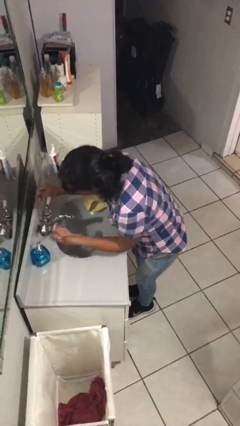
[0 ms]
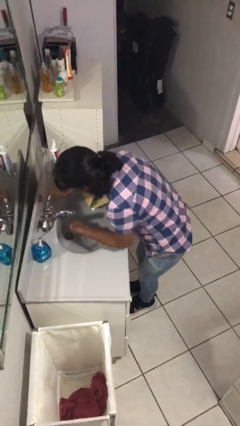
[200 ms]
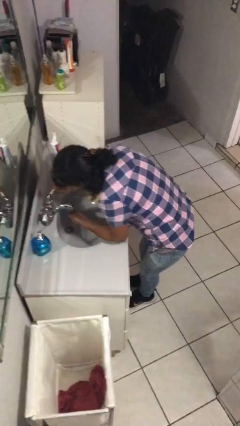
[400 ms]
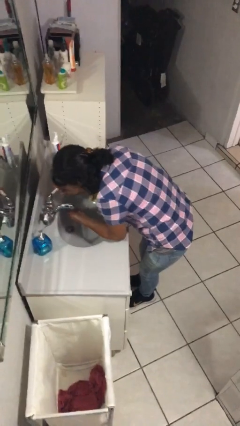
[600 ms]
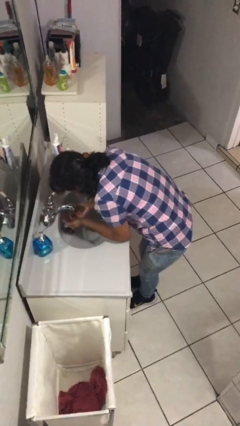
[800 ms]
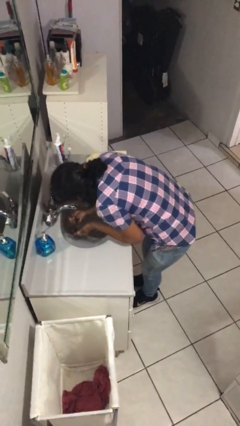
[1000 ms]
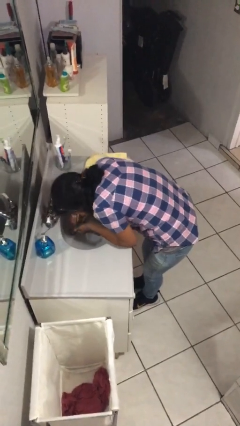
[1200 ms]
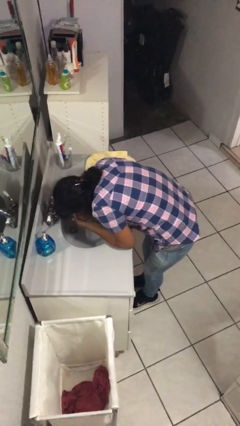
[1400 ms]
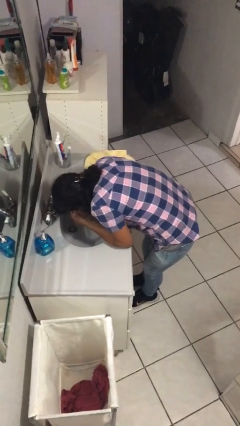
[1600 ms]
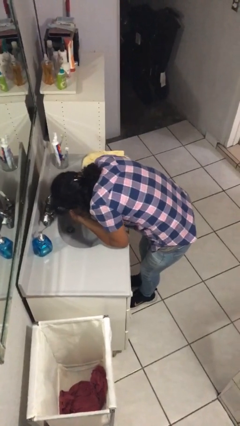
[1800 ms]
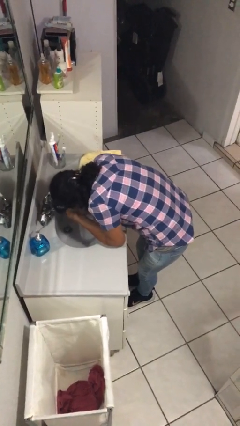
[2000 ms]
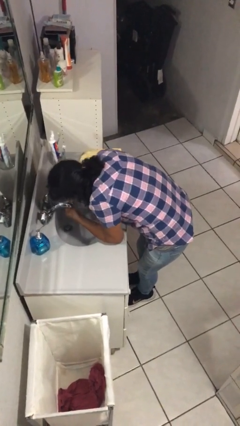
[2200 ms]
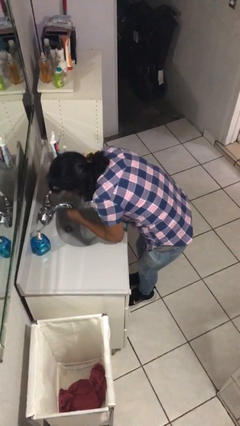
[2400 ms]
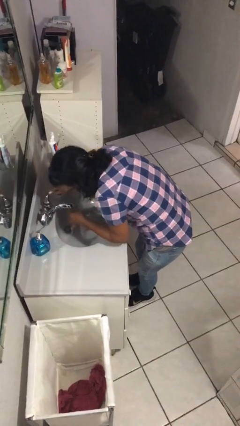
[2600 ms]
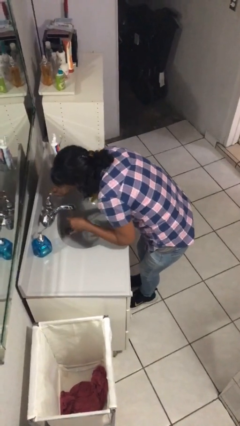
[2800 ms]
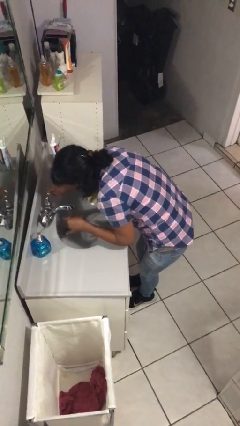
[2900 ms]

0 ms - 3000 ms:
person washes face

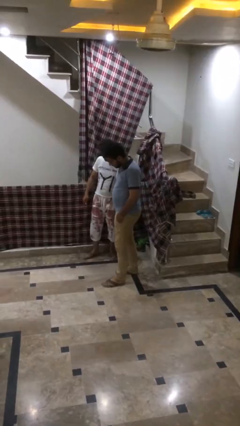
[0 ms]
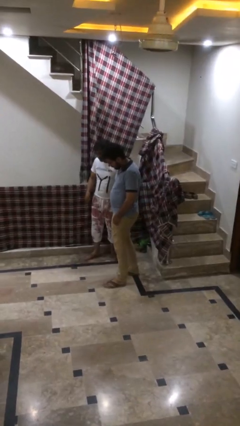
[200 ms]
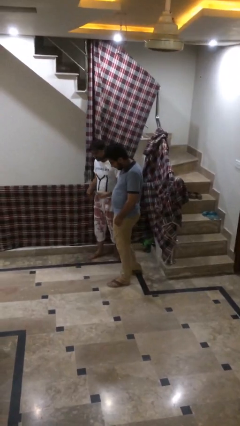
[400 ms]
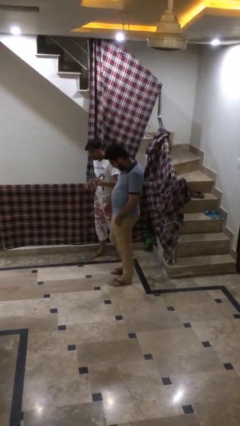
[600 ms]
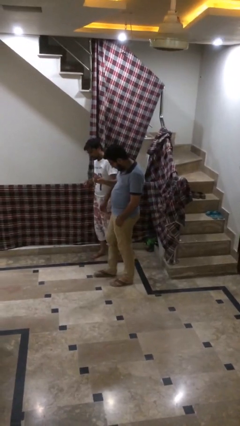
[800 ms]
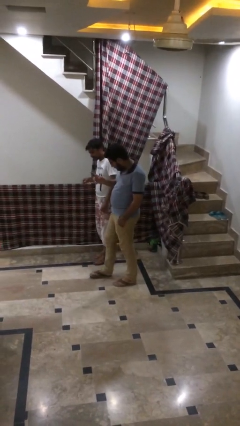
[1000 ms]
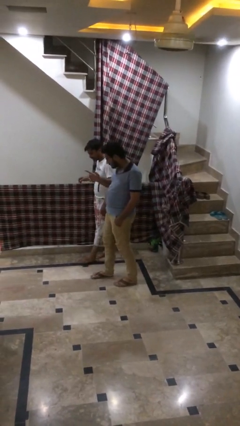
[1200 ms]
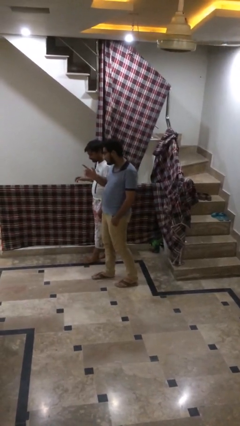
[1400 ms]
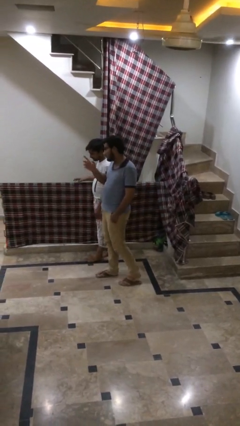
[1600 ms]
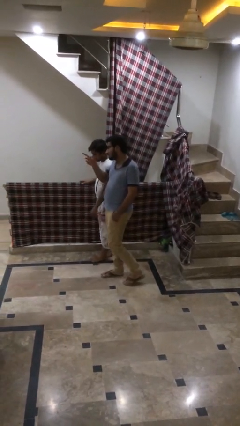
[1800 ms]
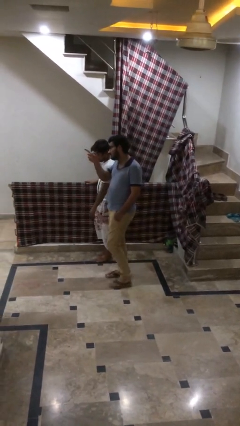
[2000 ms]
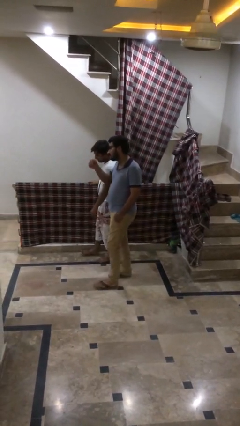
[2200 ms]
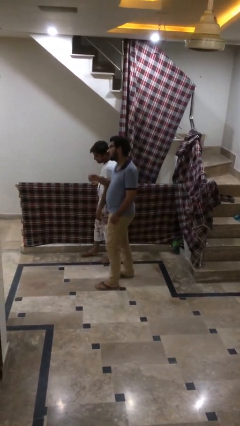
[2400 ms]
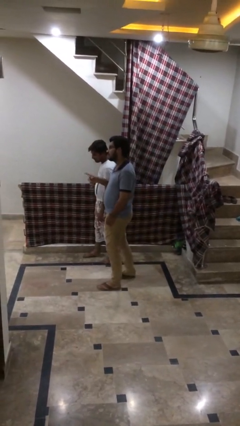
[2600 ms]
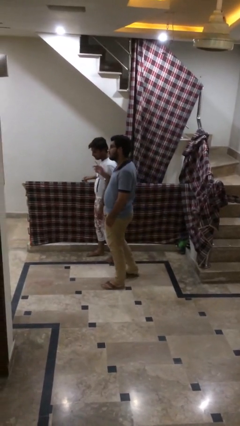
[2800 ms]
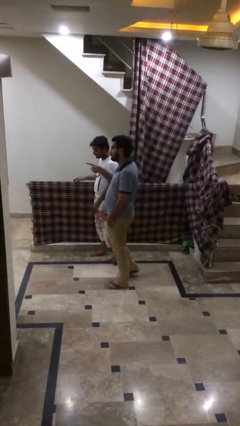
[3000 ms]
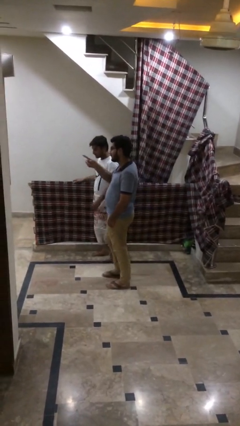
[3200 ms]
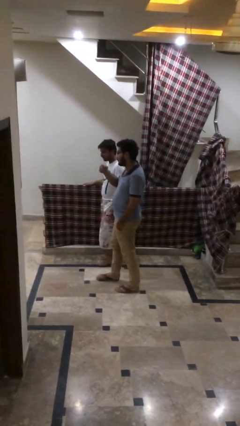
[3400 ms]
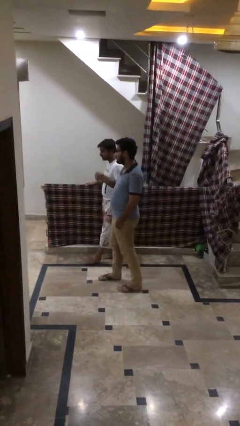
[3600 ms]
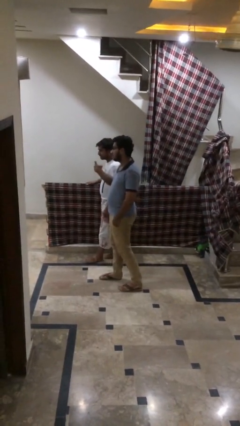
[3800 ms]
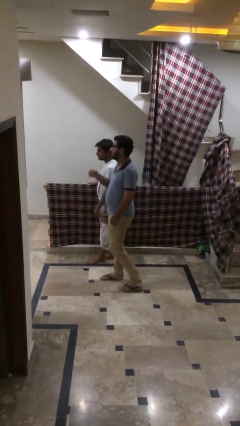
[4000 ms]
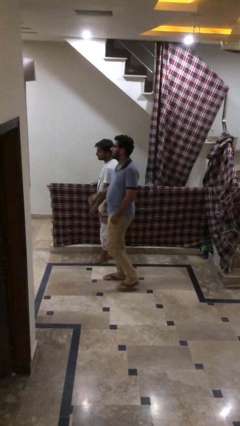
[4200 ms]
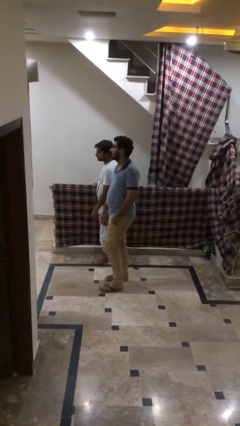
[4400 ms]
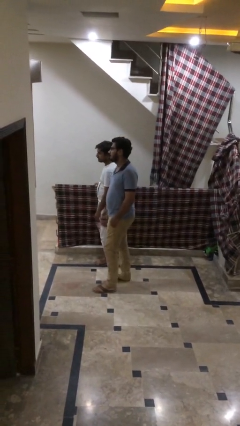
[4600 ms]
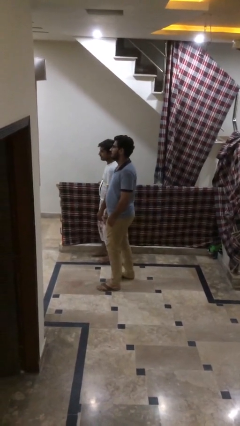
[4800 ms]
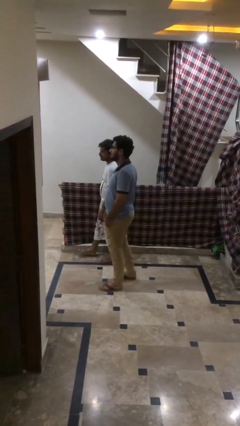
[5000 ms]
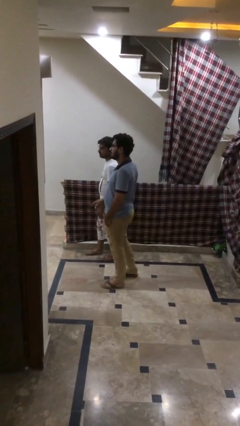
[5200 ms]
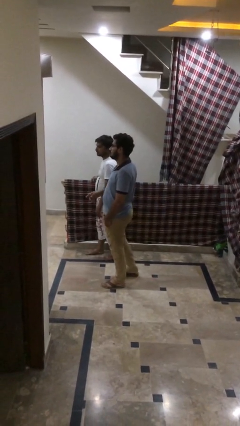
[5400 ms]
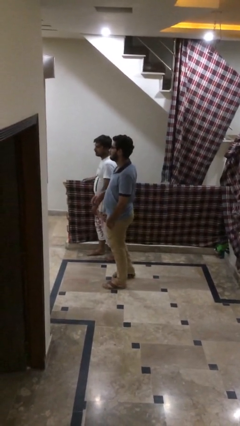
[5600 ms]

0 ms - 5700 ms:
person talks to person

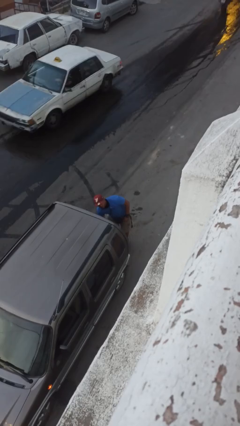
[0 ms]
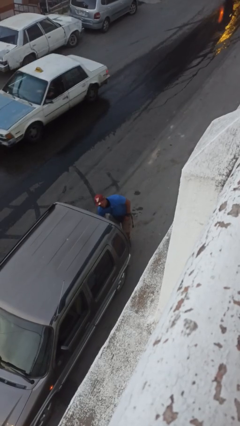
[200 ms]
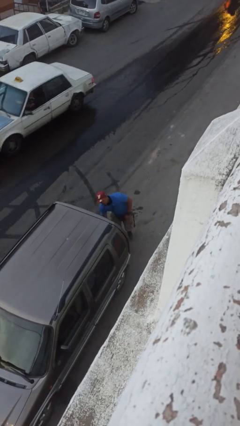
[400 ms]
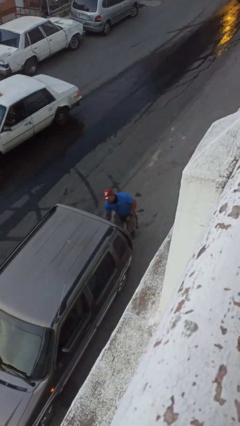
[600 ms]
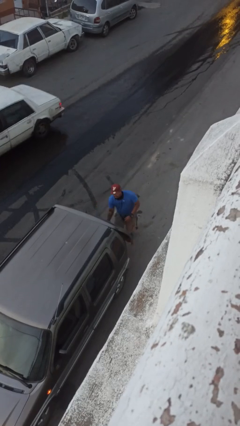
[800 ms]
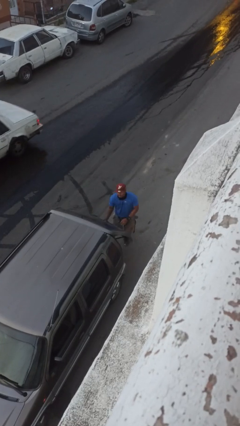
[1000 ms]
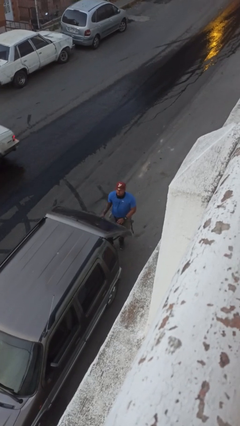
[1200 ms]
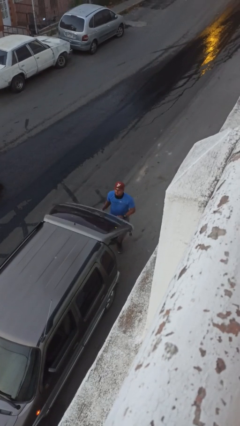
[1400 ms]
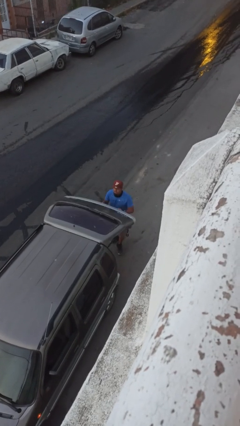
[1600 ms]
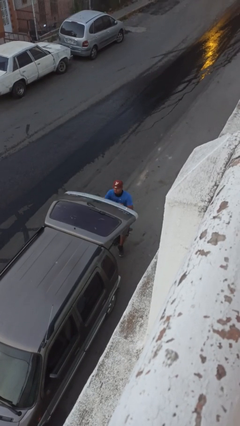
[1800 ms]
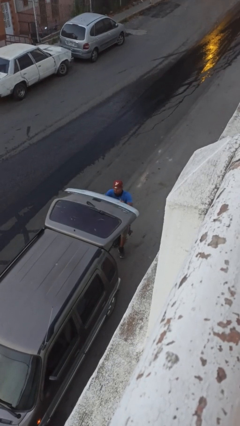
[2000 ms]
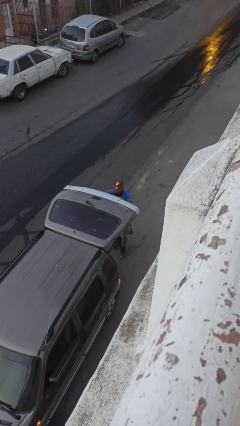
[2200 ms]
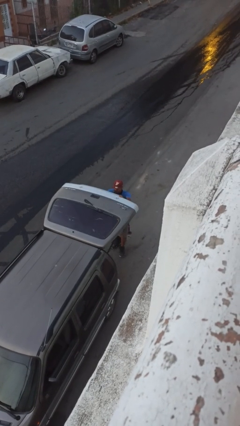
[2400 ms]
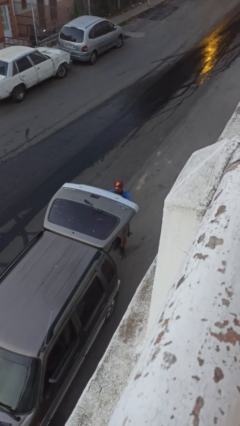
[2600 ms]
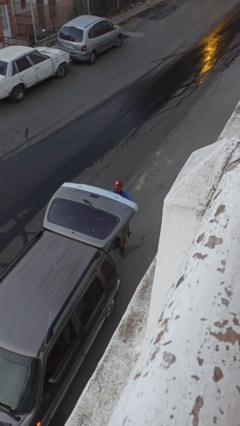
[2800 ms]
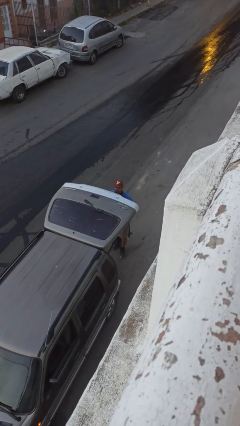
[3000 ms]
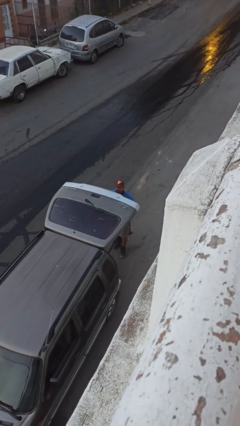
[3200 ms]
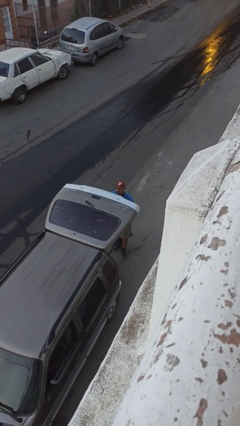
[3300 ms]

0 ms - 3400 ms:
person opens car trunk

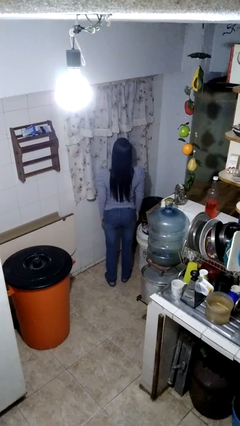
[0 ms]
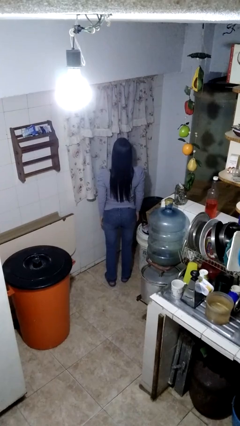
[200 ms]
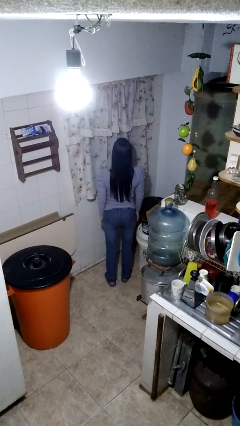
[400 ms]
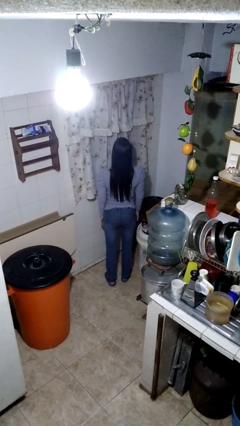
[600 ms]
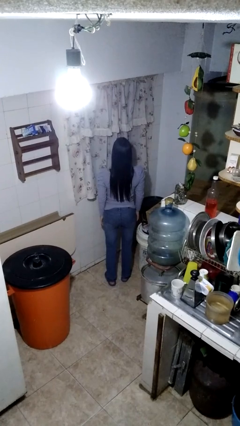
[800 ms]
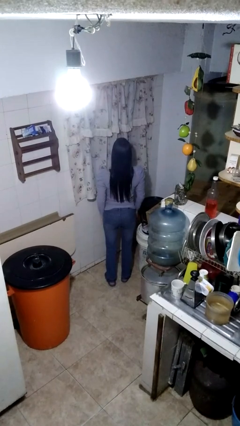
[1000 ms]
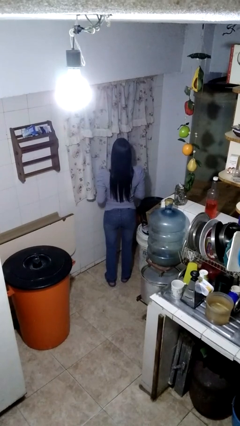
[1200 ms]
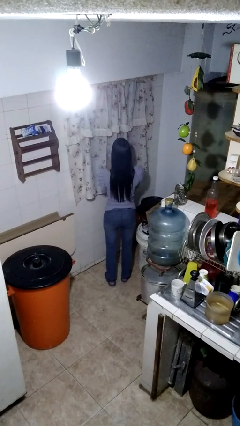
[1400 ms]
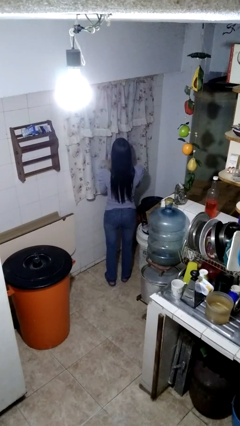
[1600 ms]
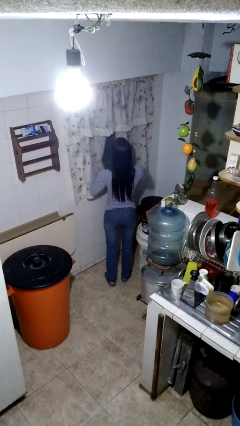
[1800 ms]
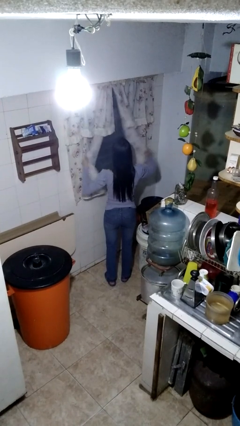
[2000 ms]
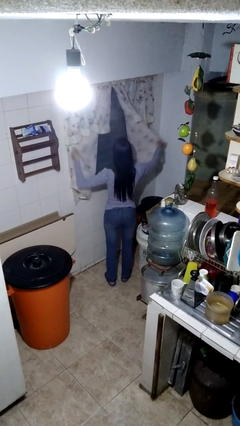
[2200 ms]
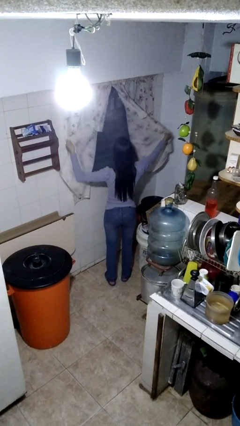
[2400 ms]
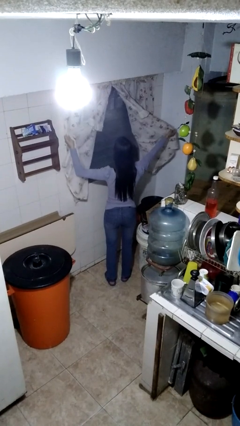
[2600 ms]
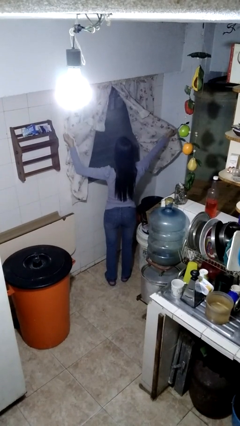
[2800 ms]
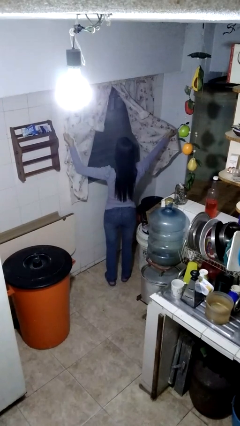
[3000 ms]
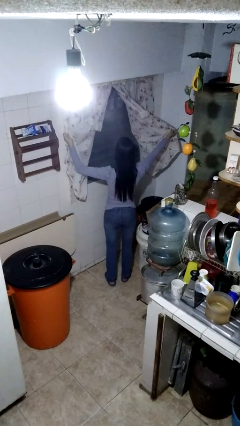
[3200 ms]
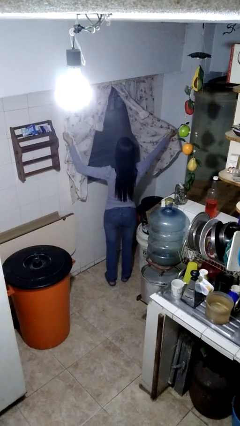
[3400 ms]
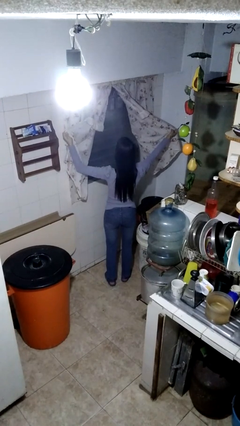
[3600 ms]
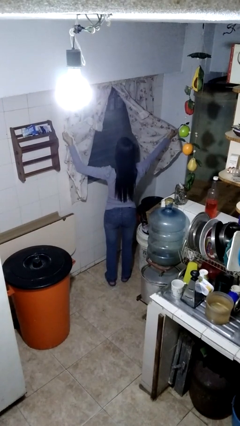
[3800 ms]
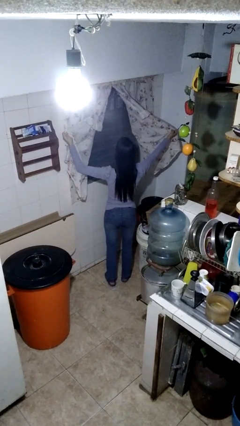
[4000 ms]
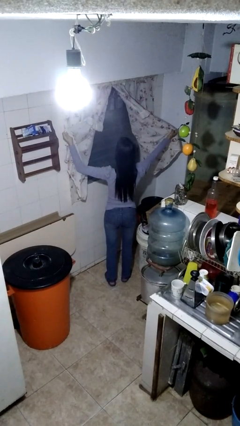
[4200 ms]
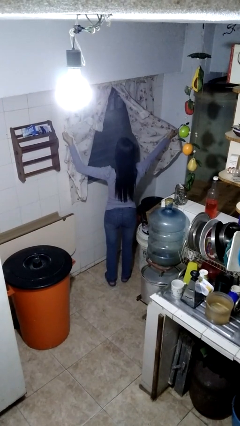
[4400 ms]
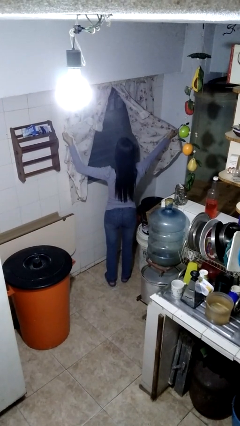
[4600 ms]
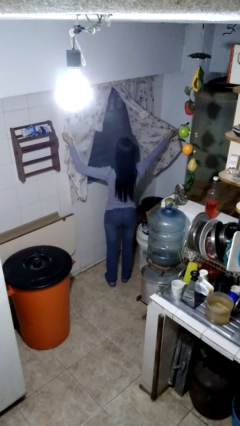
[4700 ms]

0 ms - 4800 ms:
person opens curtains

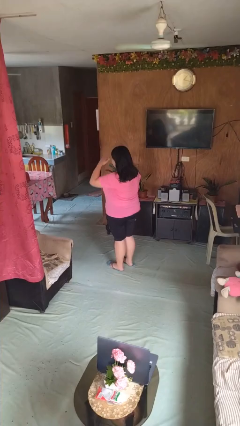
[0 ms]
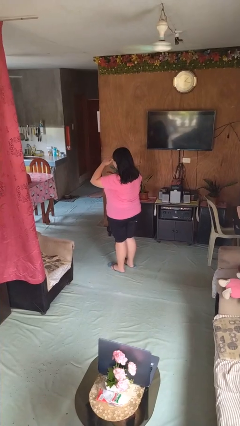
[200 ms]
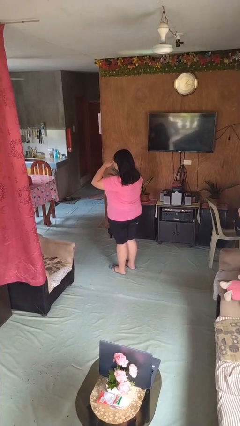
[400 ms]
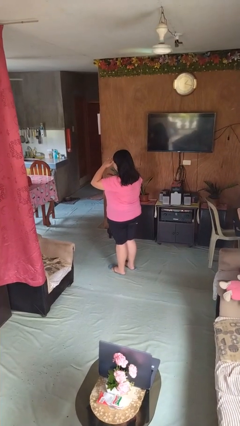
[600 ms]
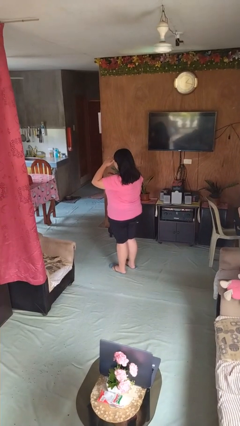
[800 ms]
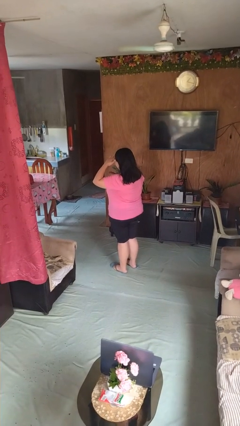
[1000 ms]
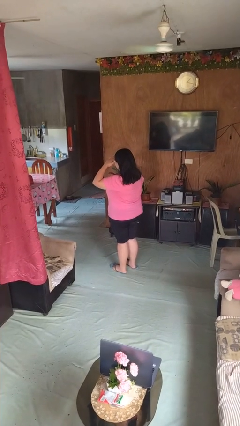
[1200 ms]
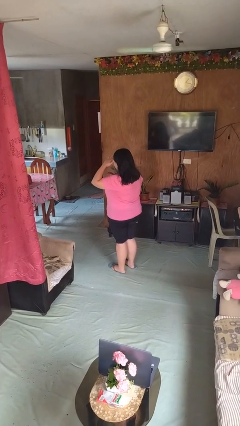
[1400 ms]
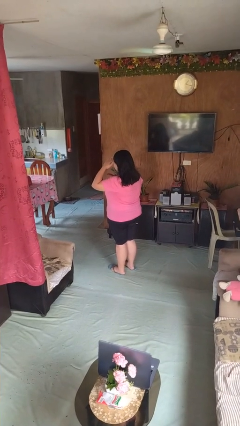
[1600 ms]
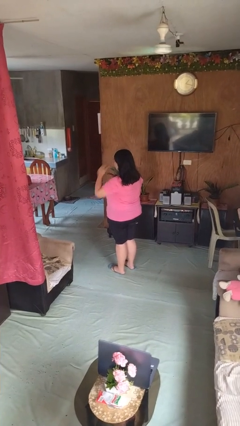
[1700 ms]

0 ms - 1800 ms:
person salutes
